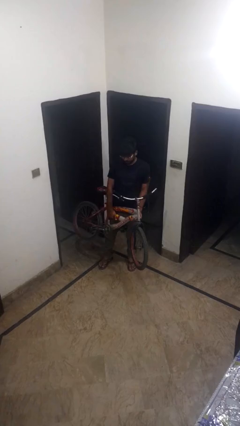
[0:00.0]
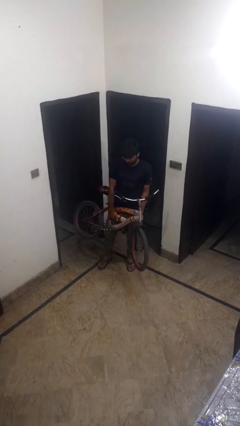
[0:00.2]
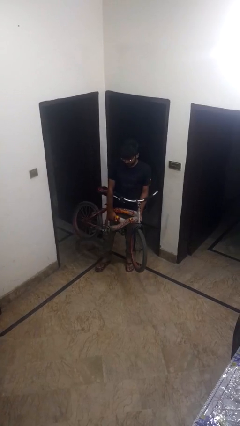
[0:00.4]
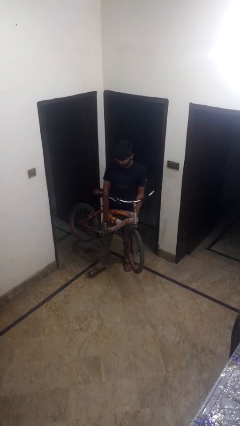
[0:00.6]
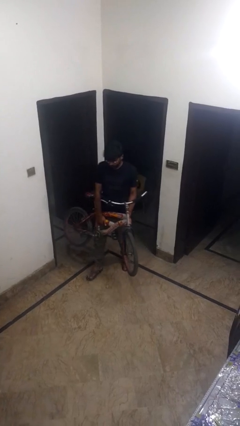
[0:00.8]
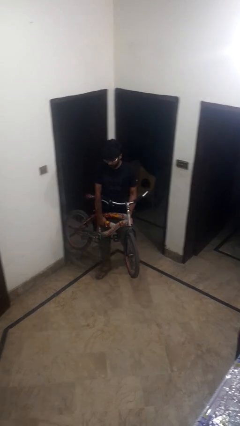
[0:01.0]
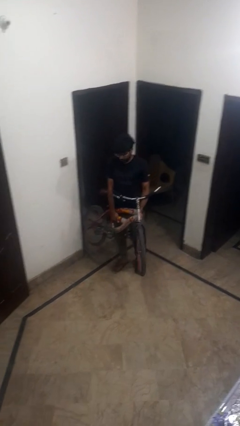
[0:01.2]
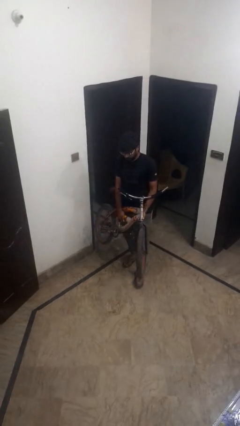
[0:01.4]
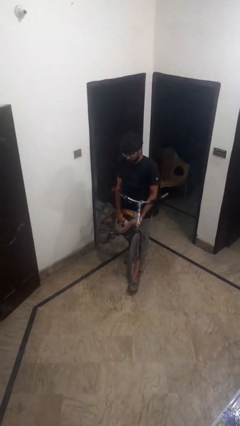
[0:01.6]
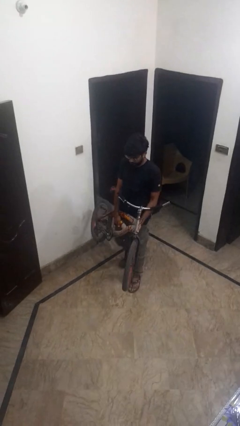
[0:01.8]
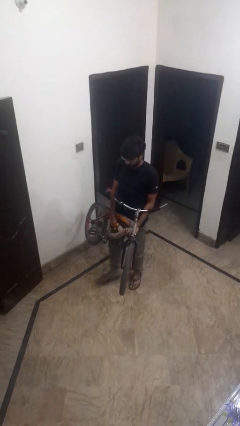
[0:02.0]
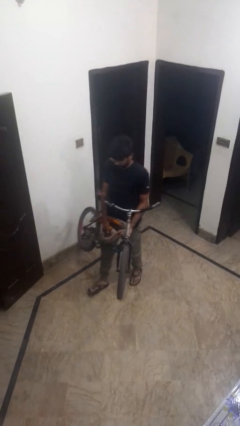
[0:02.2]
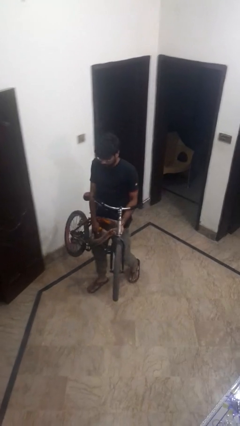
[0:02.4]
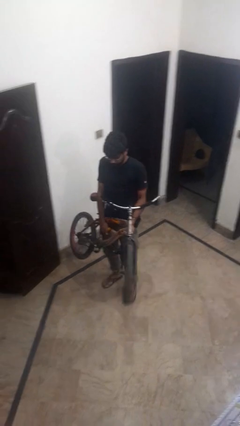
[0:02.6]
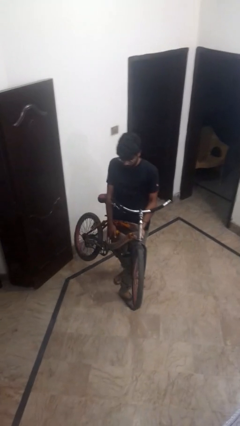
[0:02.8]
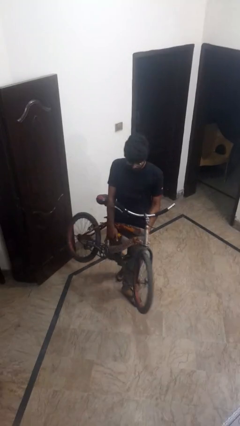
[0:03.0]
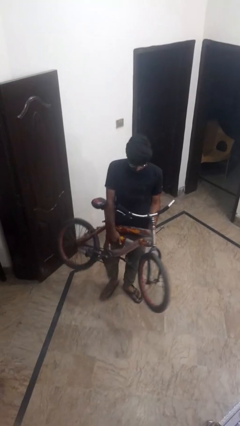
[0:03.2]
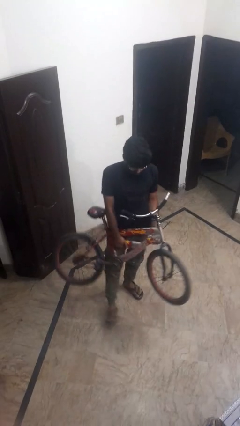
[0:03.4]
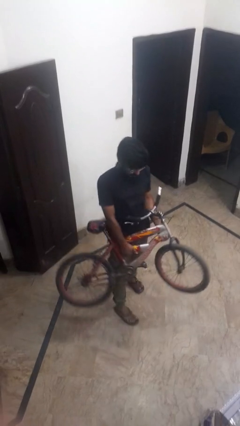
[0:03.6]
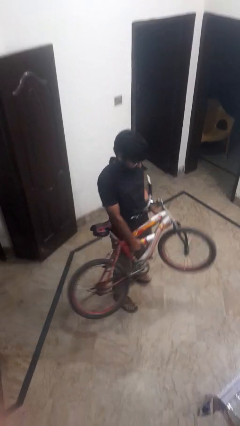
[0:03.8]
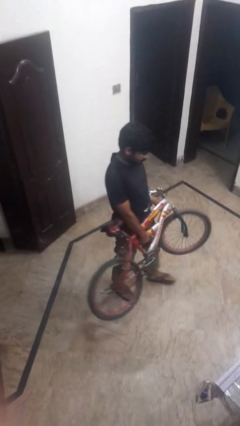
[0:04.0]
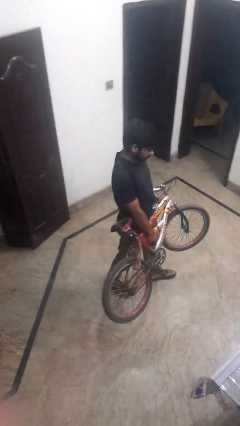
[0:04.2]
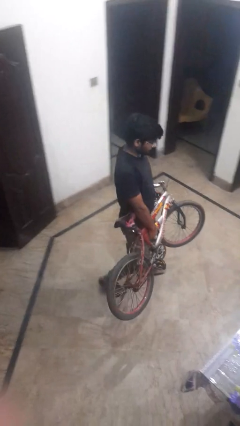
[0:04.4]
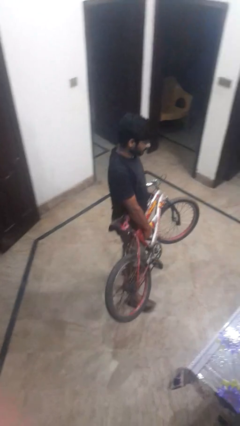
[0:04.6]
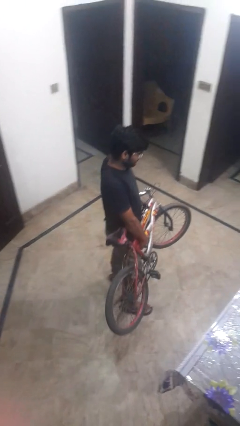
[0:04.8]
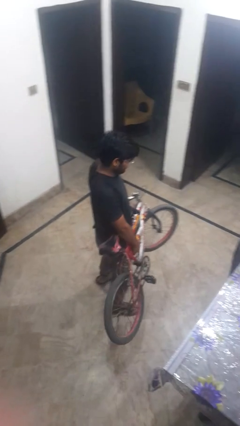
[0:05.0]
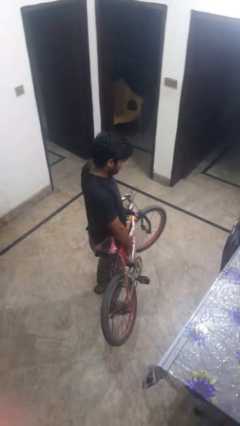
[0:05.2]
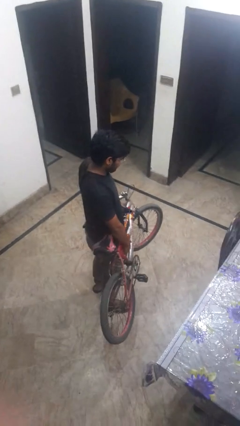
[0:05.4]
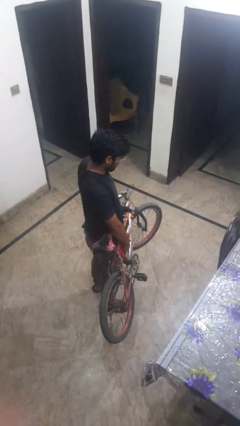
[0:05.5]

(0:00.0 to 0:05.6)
person carries bicycle

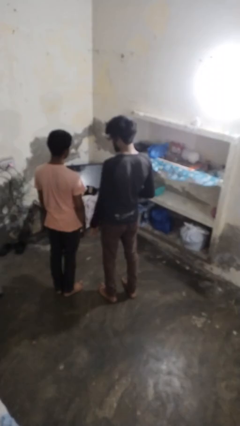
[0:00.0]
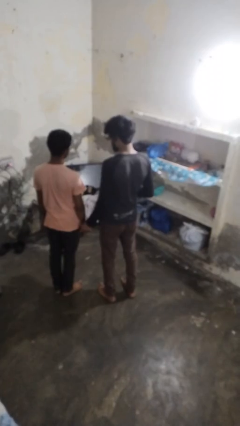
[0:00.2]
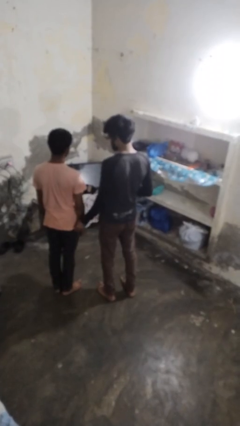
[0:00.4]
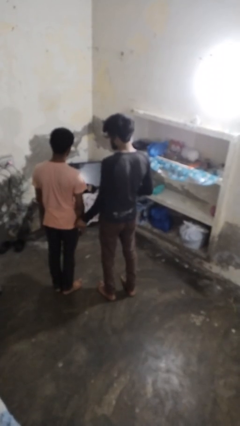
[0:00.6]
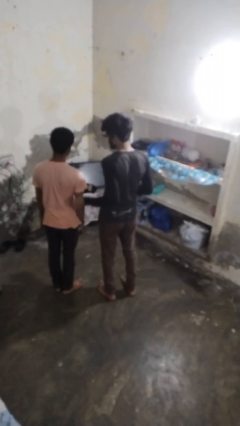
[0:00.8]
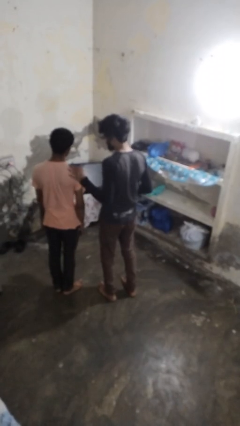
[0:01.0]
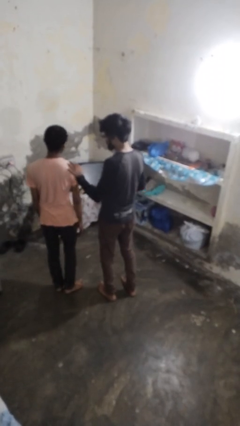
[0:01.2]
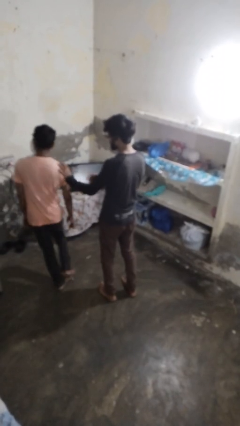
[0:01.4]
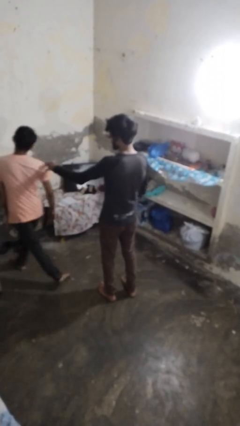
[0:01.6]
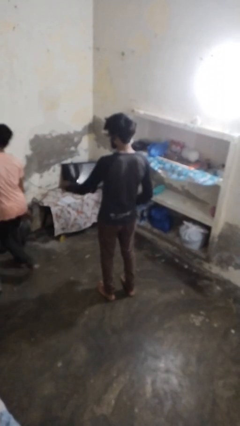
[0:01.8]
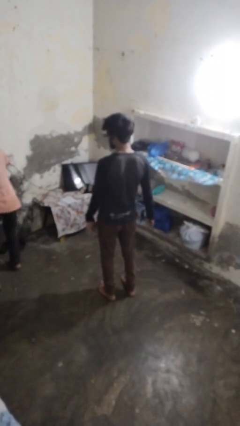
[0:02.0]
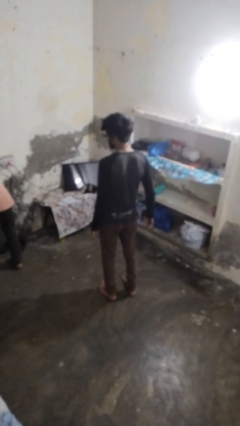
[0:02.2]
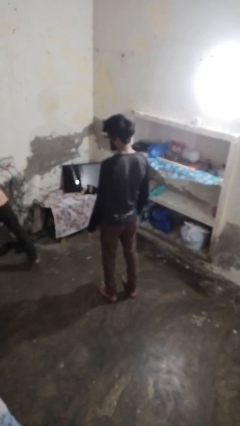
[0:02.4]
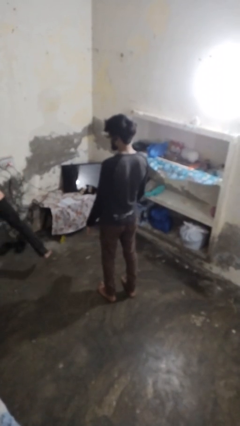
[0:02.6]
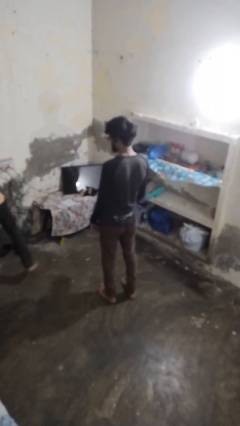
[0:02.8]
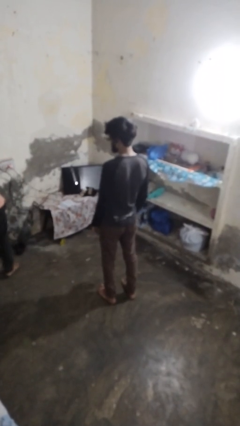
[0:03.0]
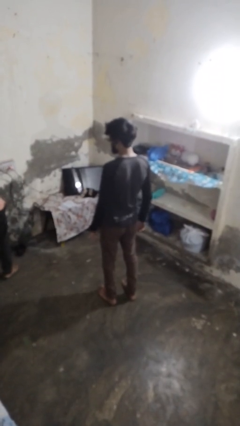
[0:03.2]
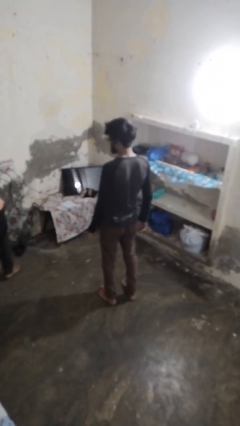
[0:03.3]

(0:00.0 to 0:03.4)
person shoves person

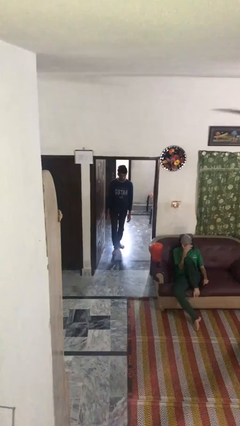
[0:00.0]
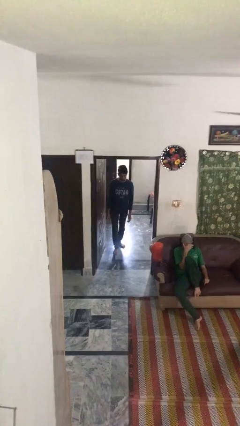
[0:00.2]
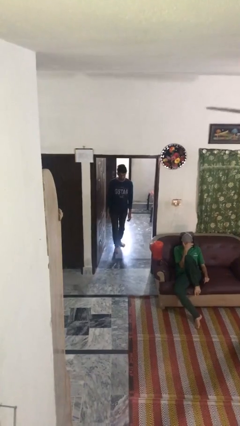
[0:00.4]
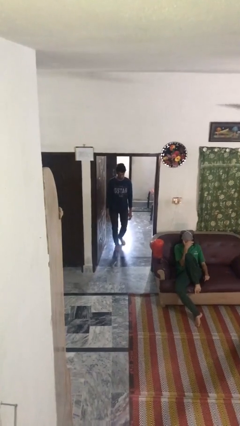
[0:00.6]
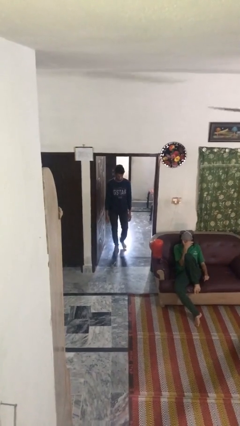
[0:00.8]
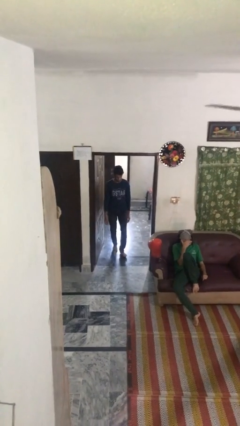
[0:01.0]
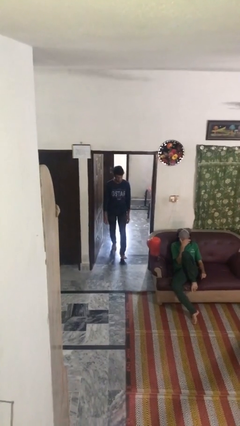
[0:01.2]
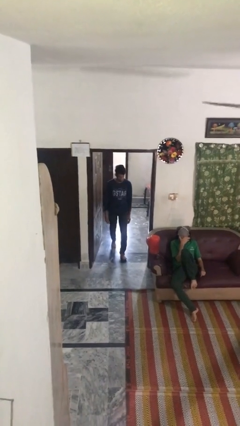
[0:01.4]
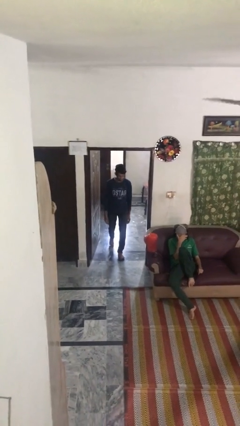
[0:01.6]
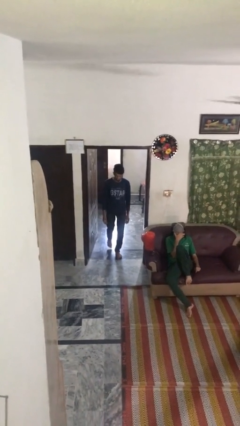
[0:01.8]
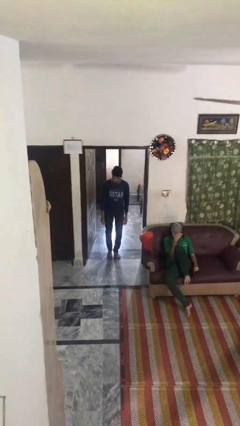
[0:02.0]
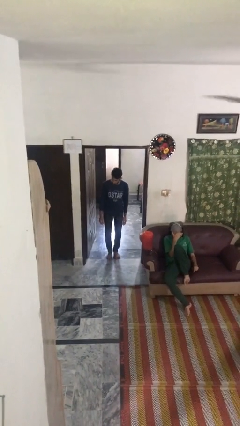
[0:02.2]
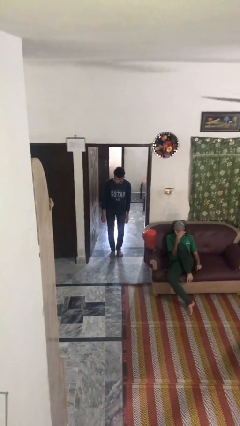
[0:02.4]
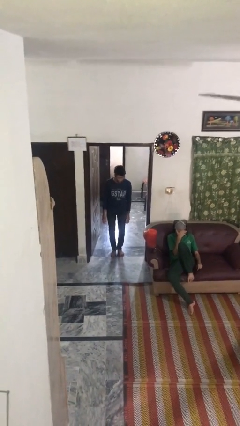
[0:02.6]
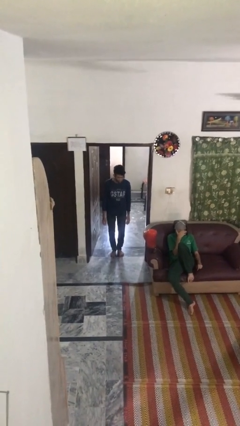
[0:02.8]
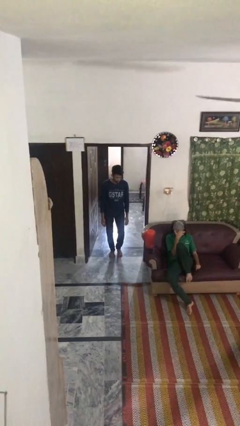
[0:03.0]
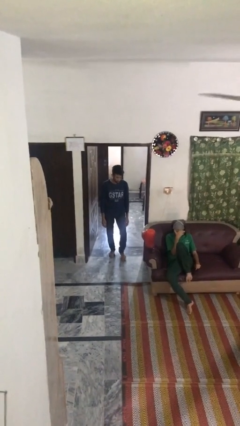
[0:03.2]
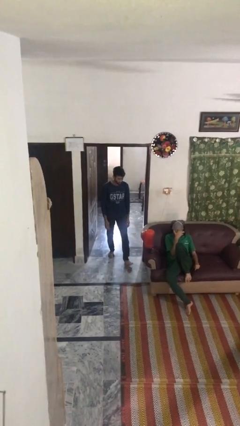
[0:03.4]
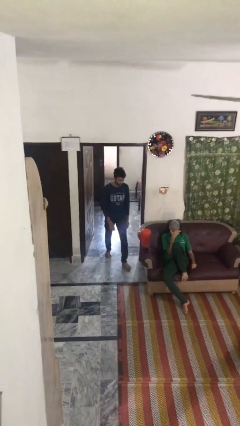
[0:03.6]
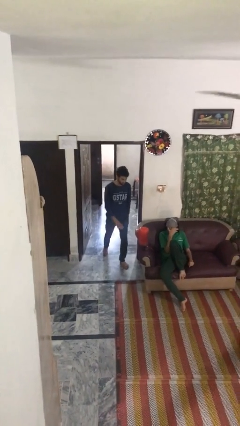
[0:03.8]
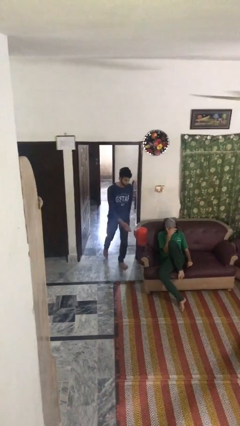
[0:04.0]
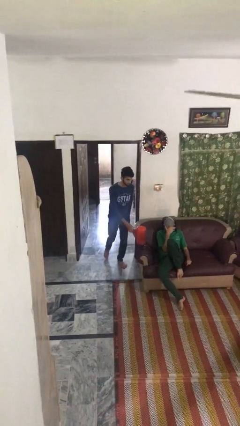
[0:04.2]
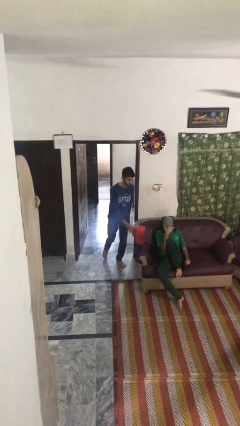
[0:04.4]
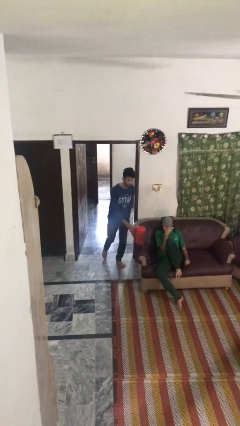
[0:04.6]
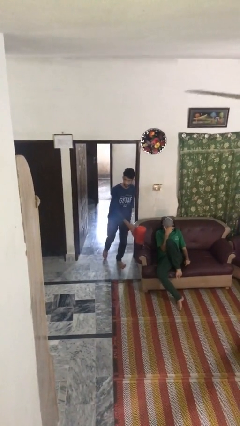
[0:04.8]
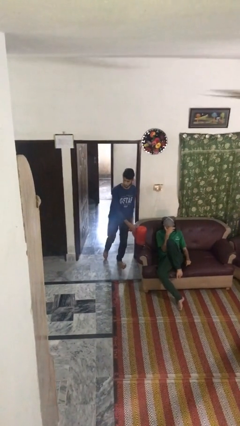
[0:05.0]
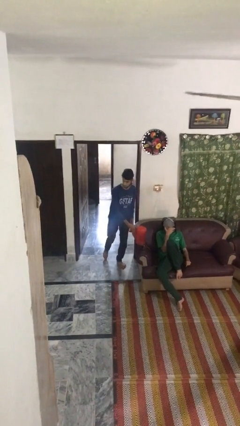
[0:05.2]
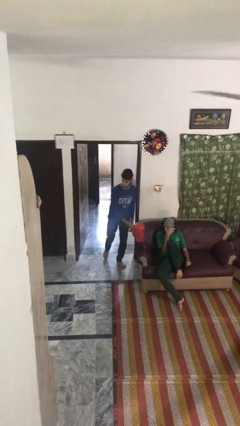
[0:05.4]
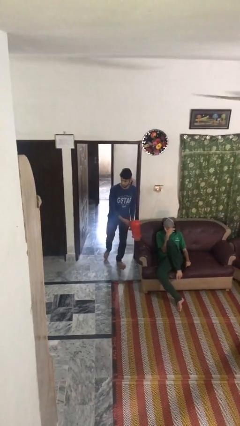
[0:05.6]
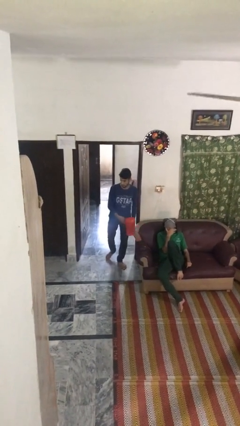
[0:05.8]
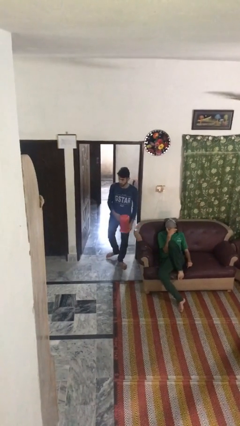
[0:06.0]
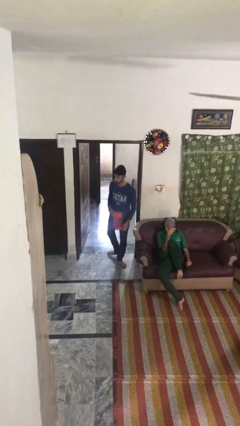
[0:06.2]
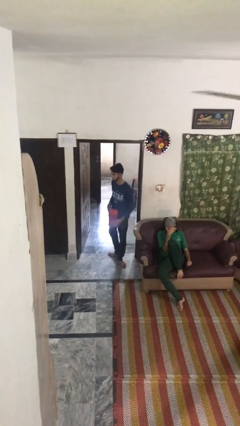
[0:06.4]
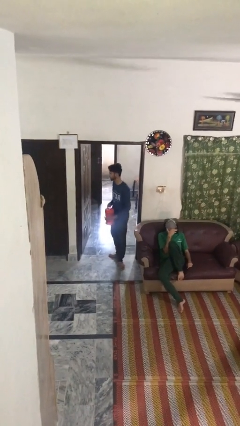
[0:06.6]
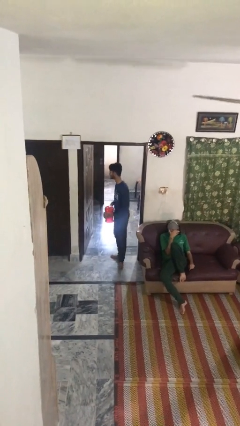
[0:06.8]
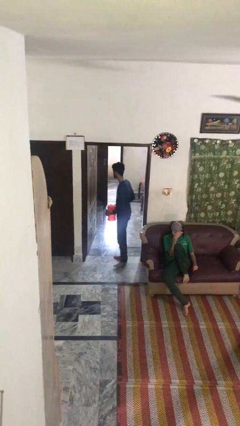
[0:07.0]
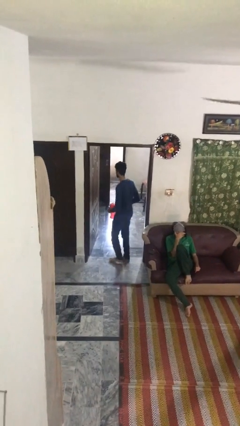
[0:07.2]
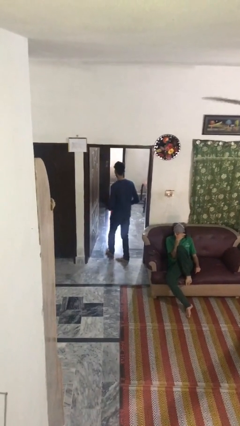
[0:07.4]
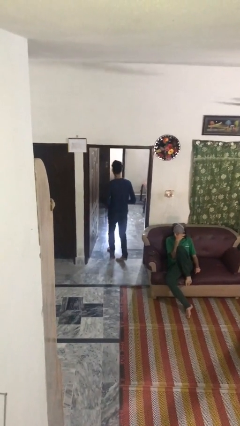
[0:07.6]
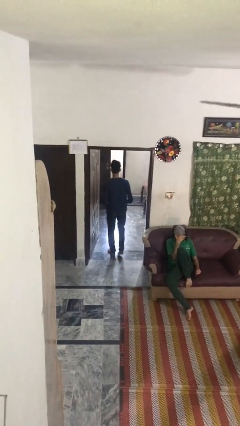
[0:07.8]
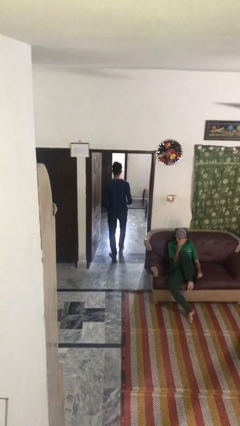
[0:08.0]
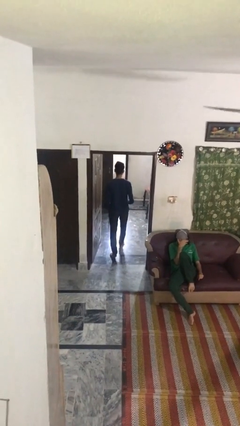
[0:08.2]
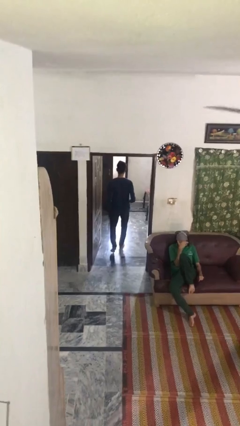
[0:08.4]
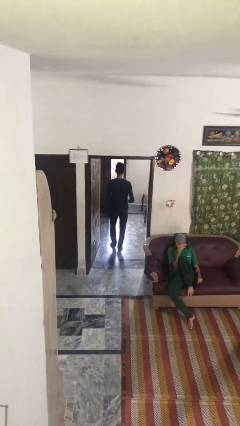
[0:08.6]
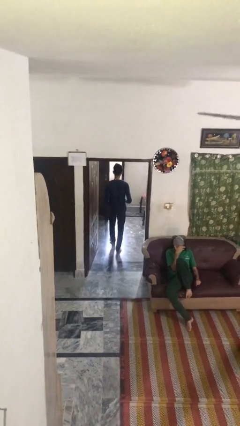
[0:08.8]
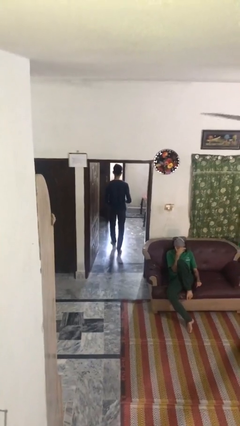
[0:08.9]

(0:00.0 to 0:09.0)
person steals object from person
